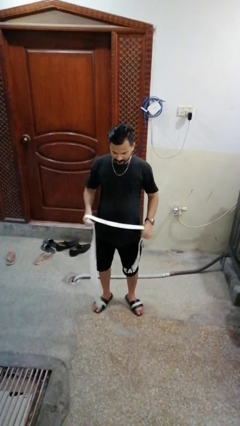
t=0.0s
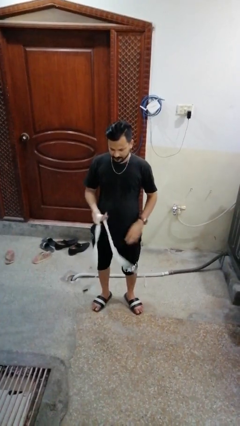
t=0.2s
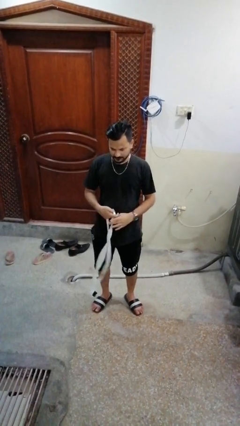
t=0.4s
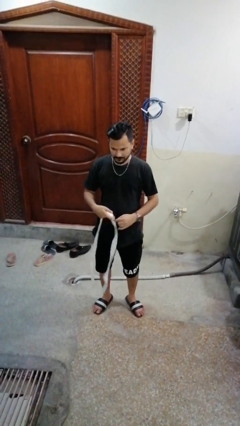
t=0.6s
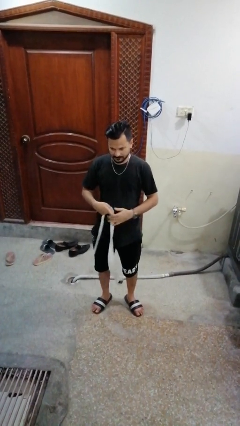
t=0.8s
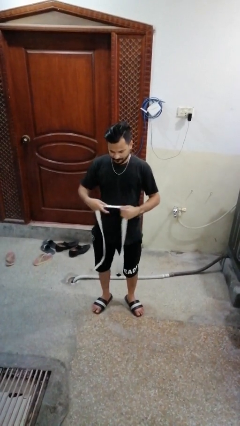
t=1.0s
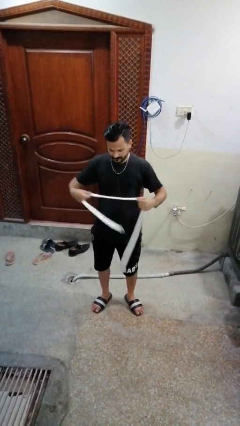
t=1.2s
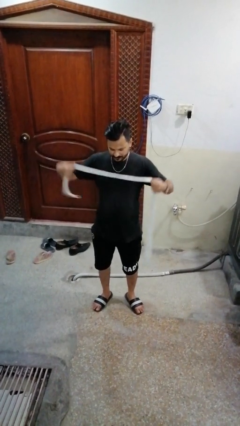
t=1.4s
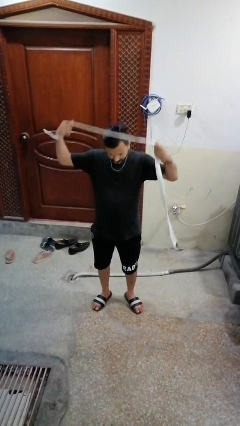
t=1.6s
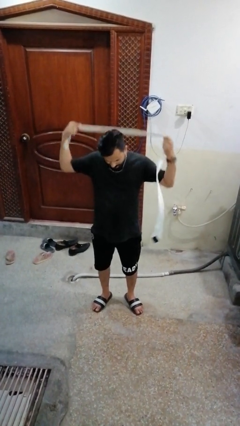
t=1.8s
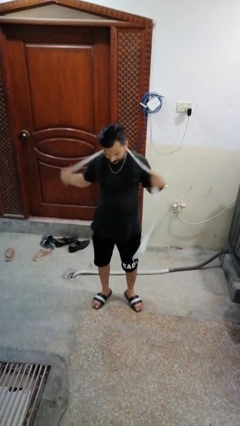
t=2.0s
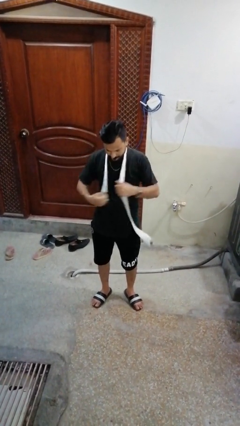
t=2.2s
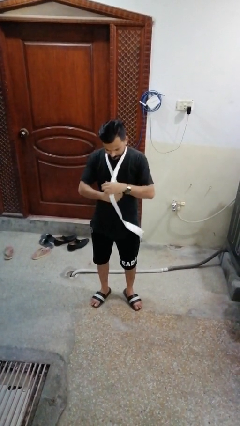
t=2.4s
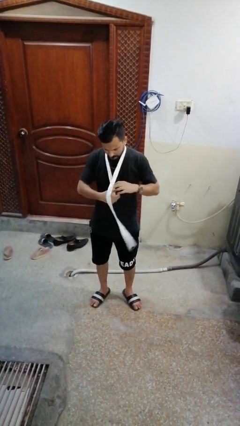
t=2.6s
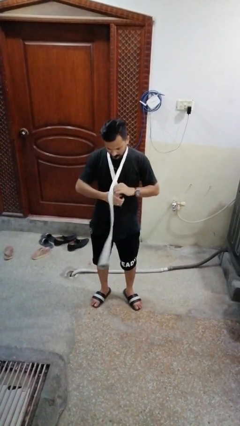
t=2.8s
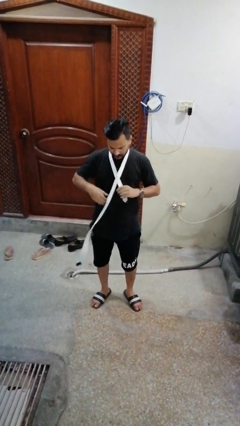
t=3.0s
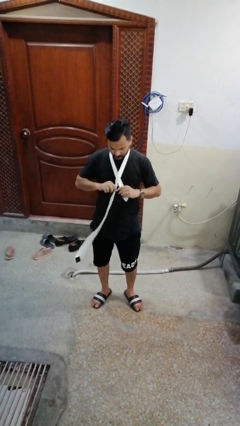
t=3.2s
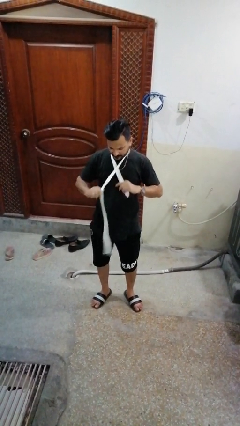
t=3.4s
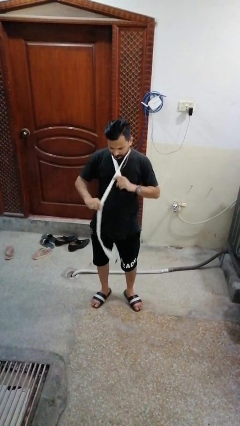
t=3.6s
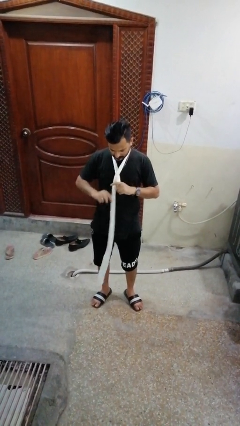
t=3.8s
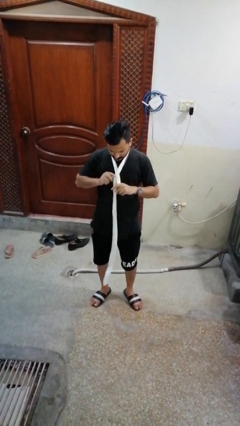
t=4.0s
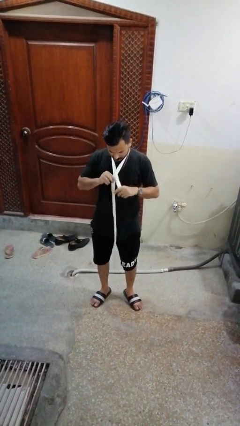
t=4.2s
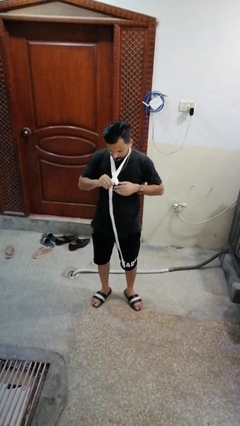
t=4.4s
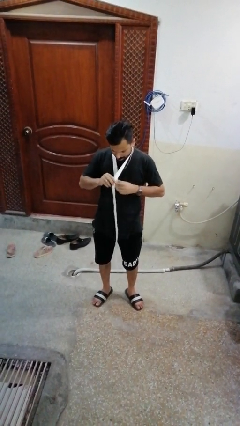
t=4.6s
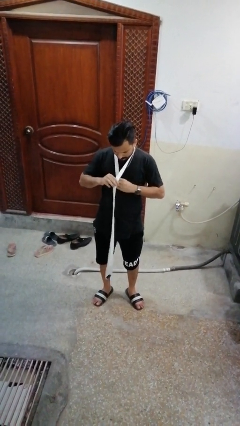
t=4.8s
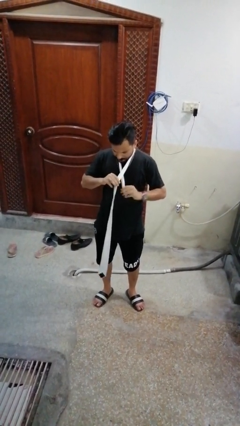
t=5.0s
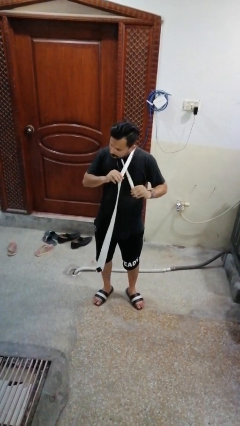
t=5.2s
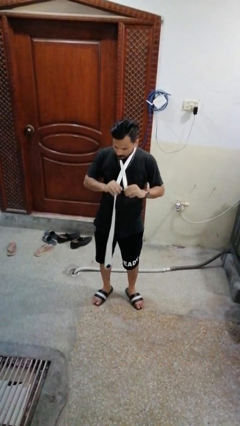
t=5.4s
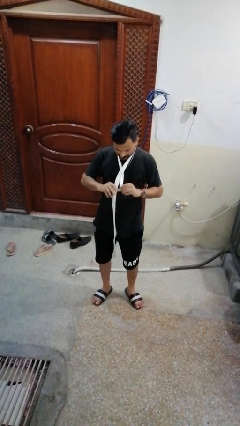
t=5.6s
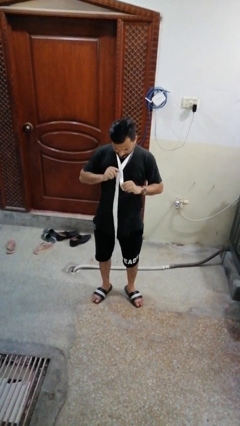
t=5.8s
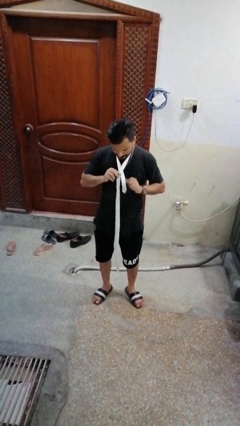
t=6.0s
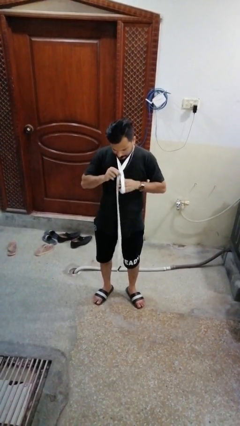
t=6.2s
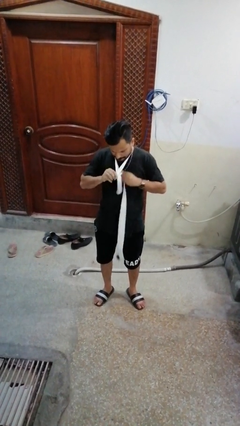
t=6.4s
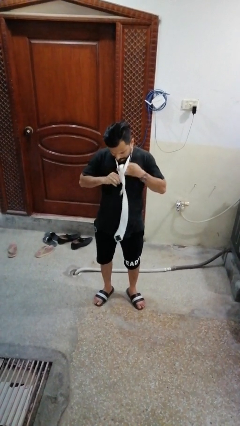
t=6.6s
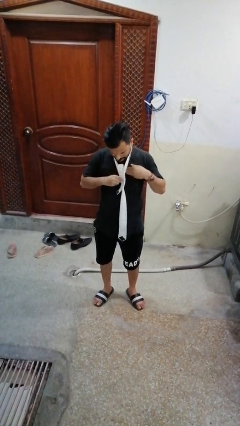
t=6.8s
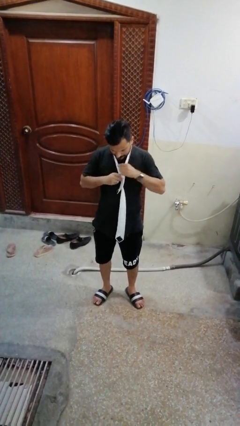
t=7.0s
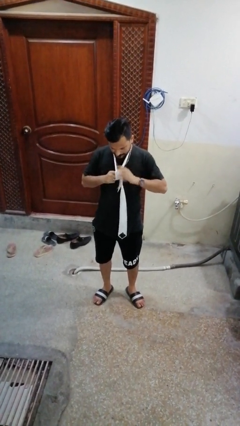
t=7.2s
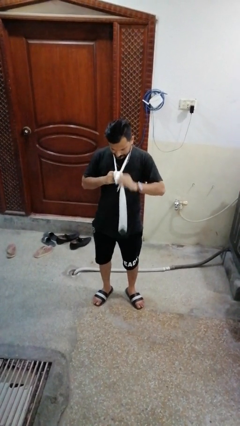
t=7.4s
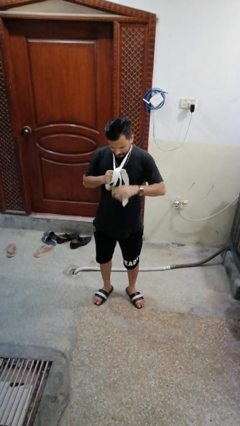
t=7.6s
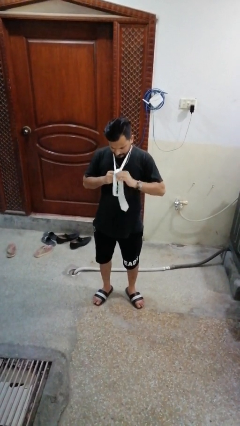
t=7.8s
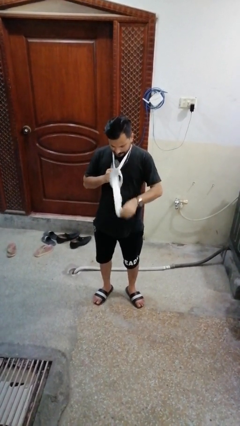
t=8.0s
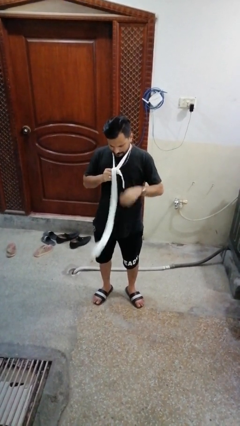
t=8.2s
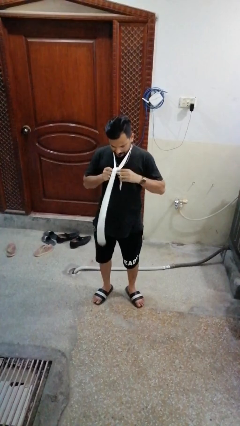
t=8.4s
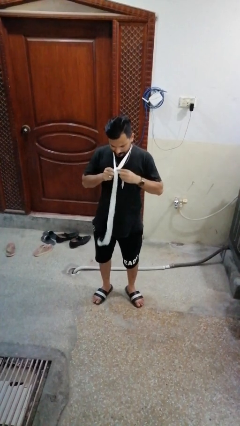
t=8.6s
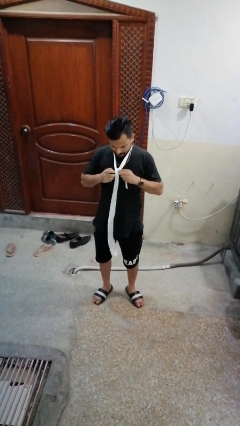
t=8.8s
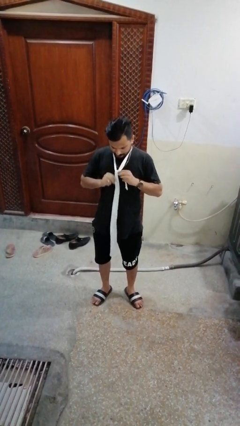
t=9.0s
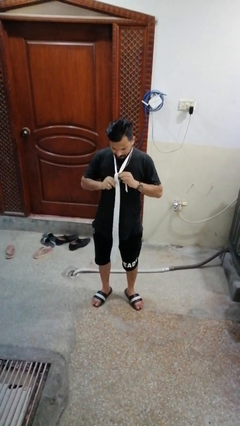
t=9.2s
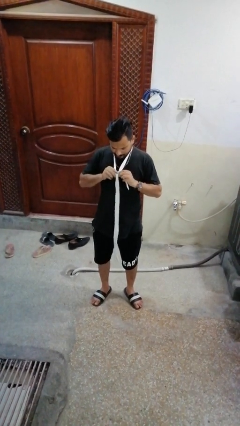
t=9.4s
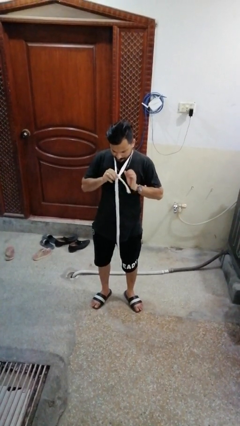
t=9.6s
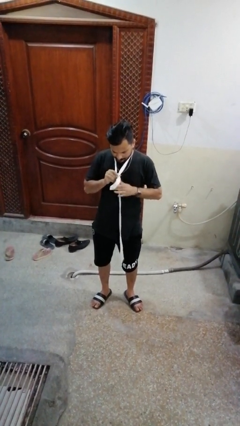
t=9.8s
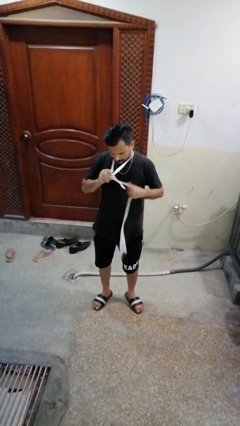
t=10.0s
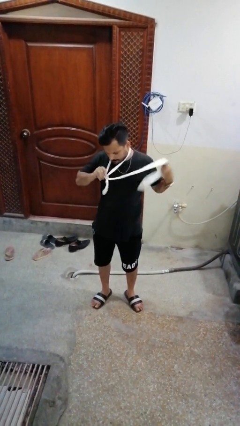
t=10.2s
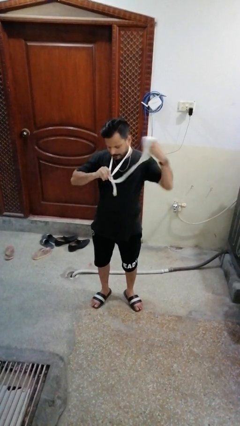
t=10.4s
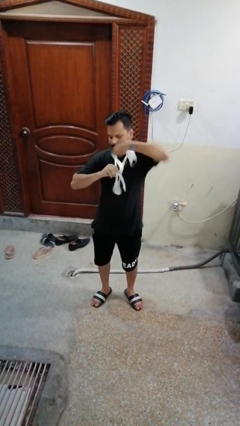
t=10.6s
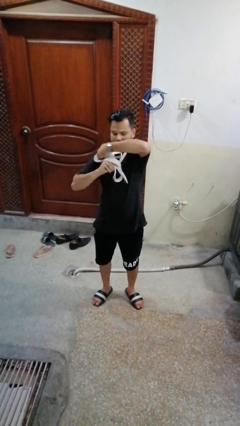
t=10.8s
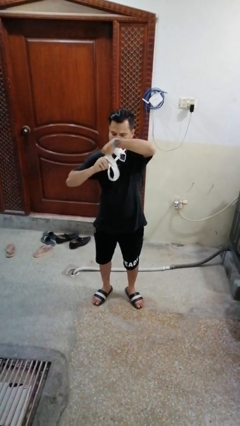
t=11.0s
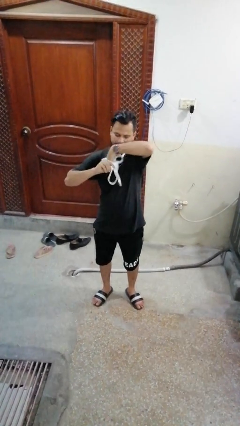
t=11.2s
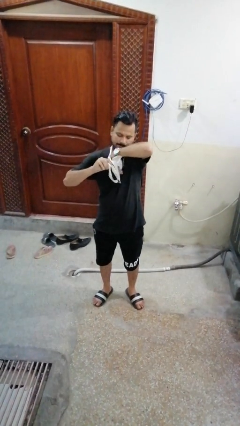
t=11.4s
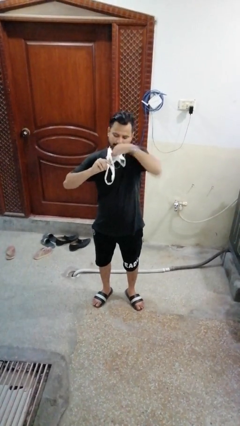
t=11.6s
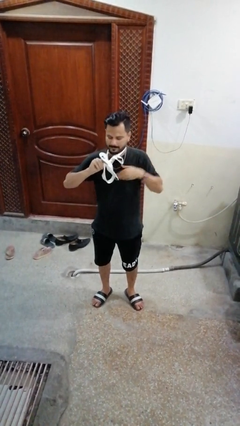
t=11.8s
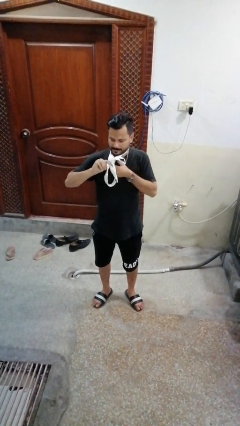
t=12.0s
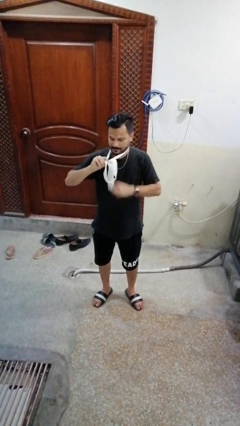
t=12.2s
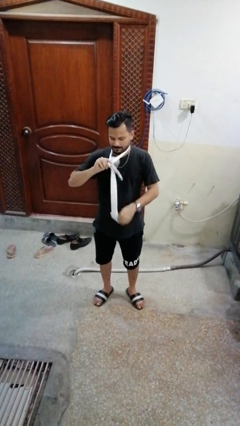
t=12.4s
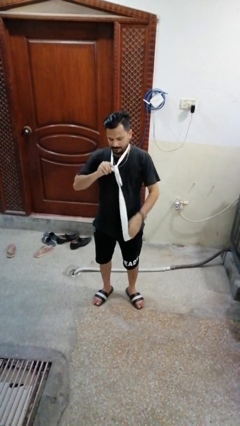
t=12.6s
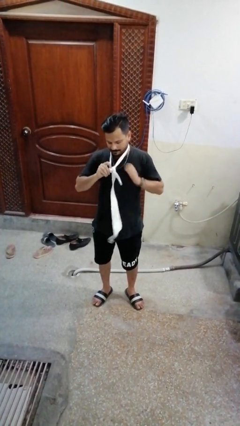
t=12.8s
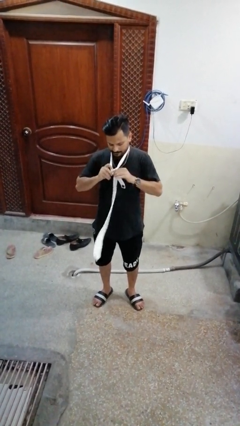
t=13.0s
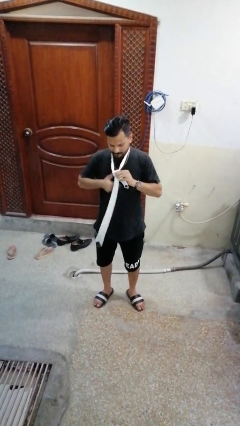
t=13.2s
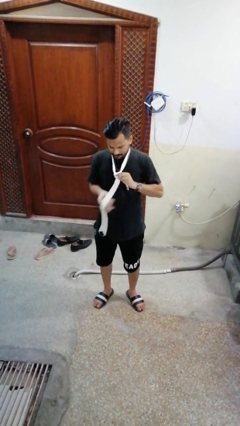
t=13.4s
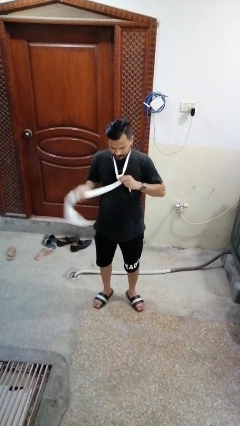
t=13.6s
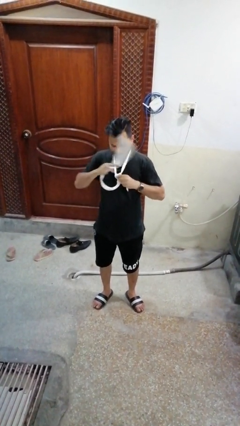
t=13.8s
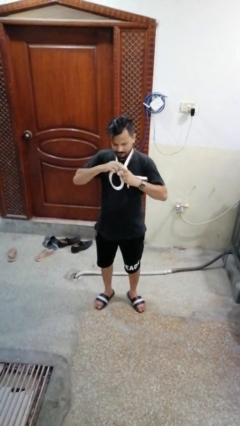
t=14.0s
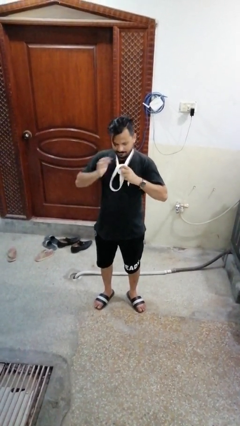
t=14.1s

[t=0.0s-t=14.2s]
person puts on necktie

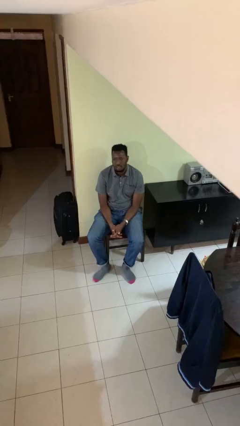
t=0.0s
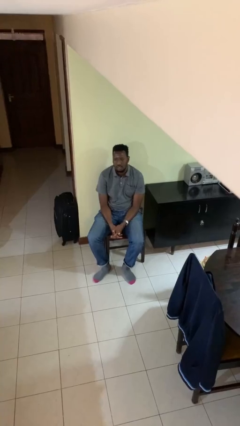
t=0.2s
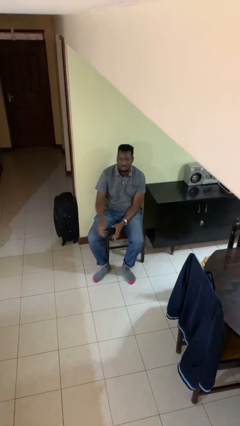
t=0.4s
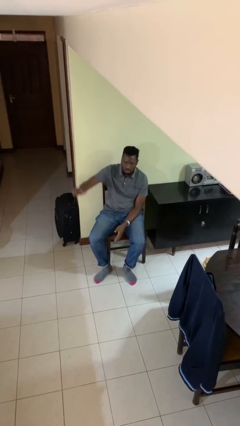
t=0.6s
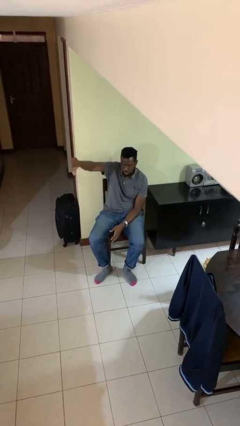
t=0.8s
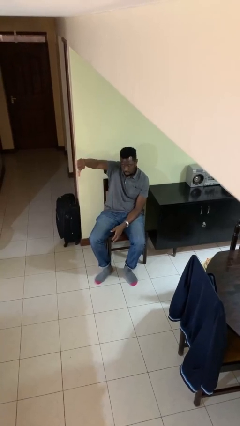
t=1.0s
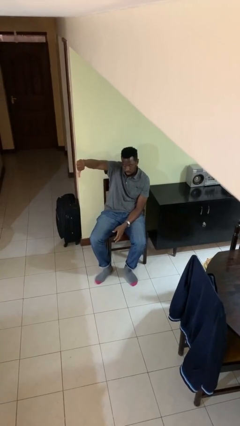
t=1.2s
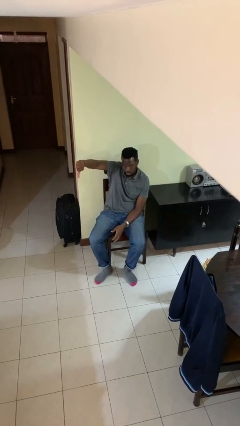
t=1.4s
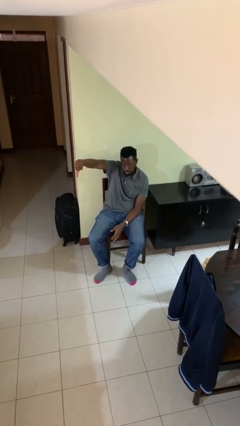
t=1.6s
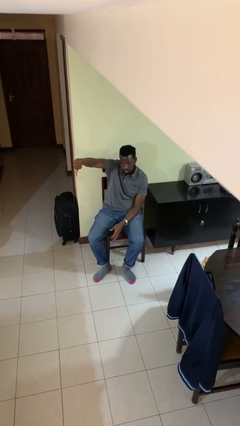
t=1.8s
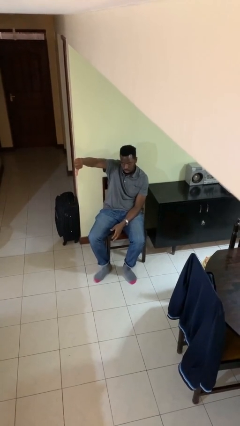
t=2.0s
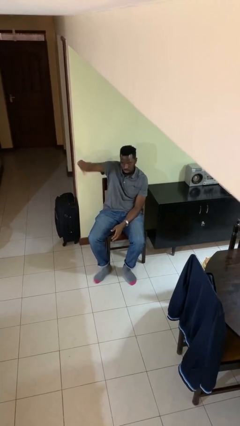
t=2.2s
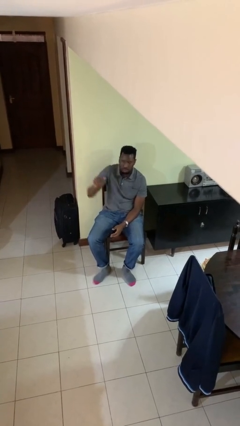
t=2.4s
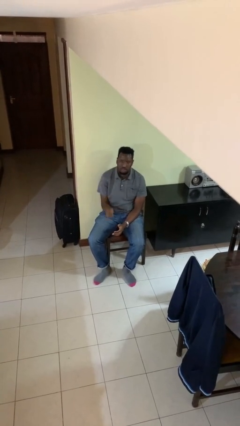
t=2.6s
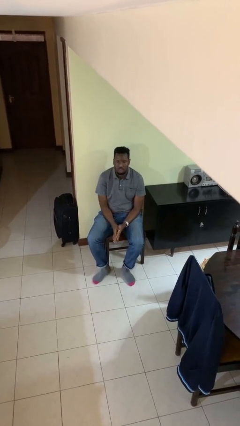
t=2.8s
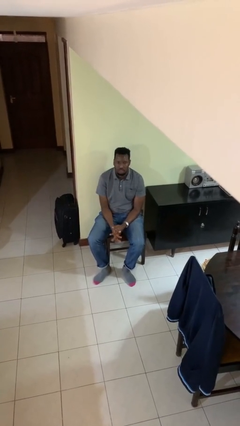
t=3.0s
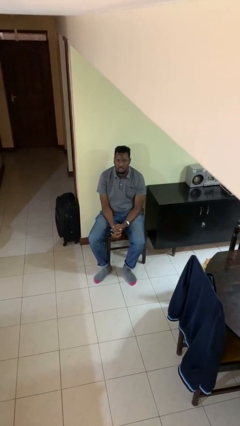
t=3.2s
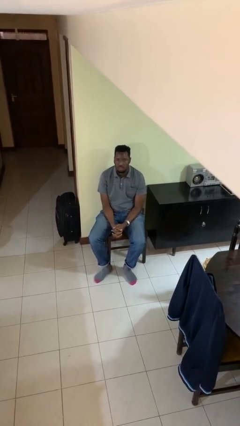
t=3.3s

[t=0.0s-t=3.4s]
person gestures thumbs down
